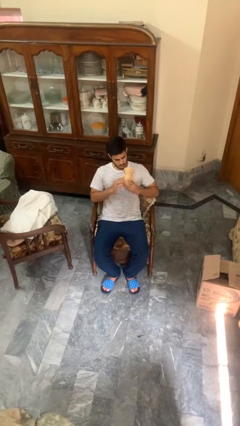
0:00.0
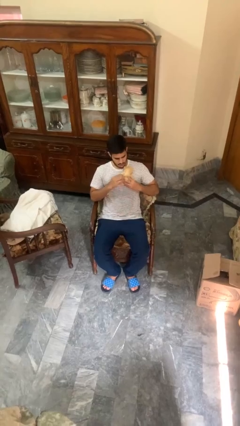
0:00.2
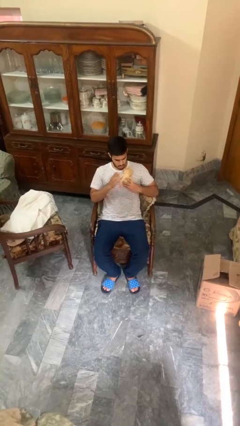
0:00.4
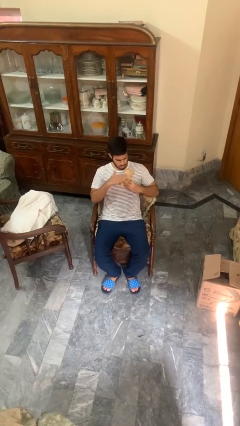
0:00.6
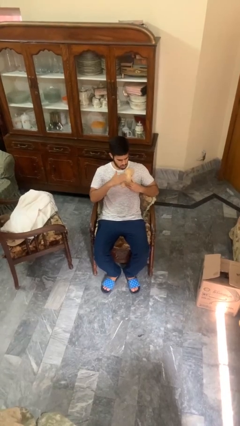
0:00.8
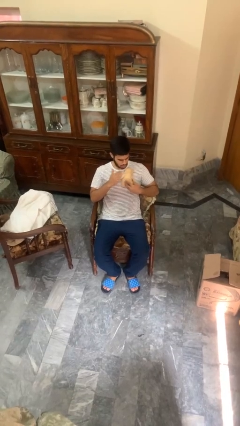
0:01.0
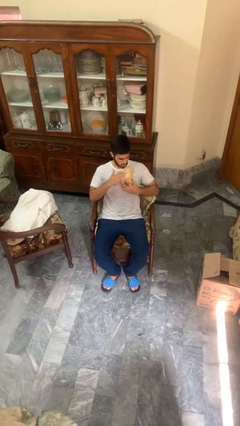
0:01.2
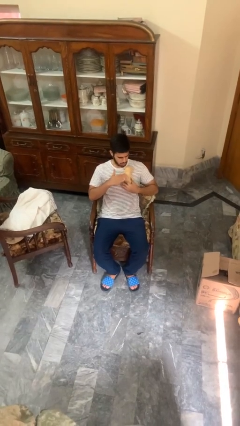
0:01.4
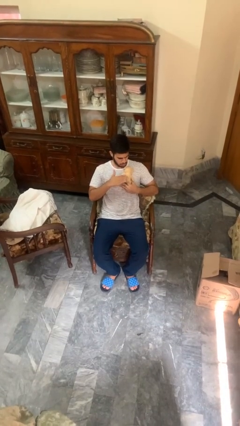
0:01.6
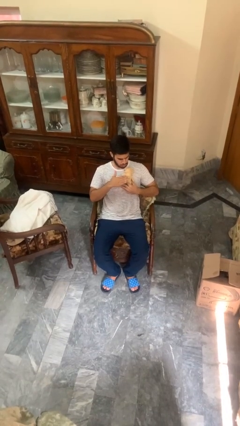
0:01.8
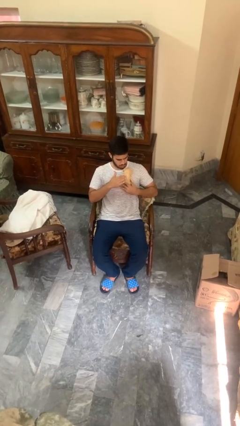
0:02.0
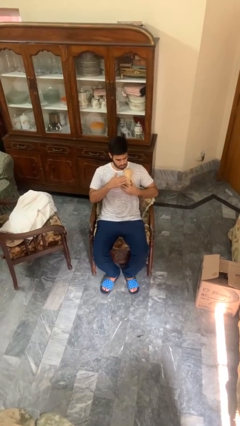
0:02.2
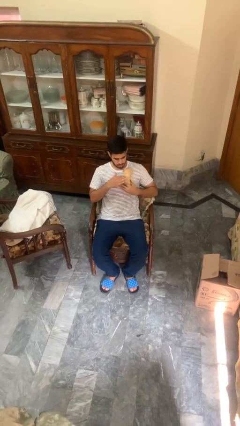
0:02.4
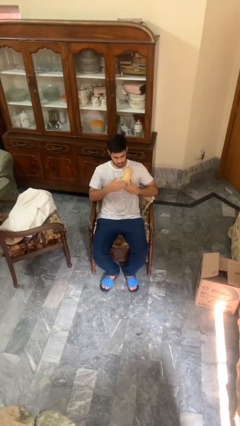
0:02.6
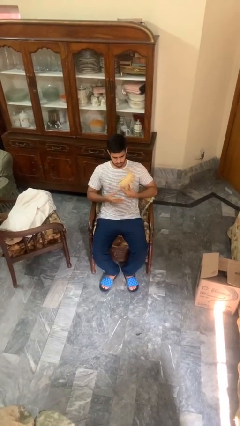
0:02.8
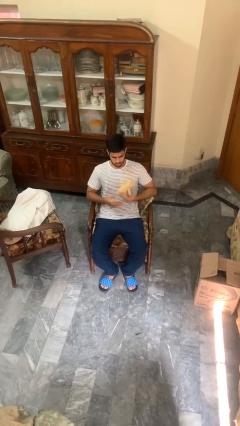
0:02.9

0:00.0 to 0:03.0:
person hugs stuffed animal

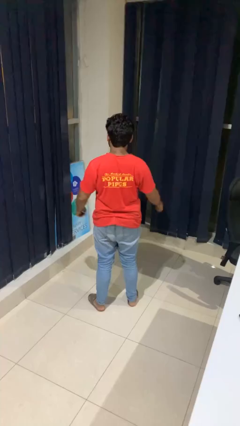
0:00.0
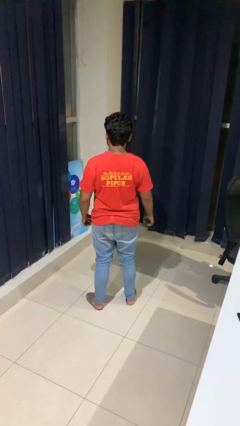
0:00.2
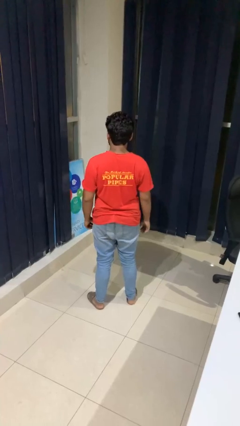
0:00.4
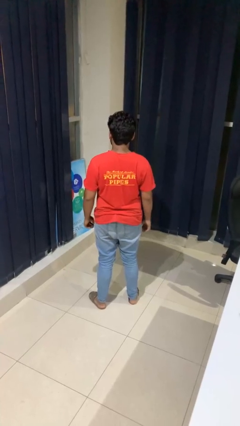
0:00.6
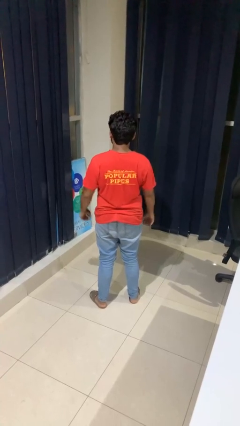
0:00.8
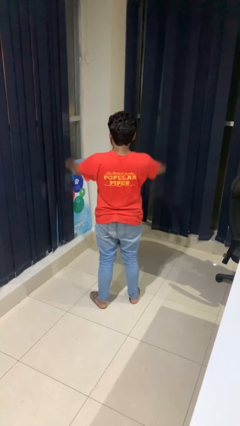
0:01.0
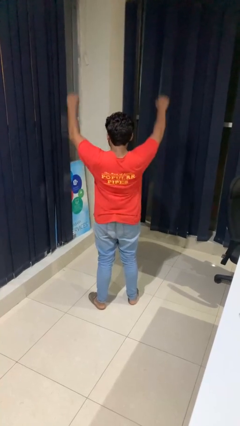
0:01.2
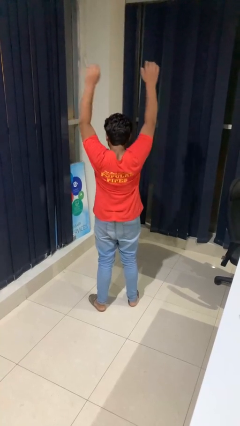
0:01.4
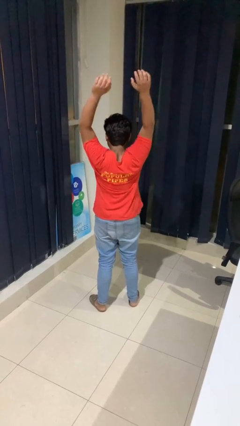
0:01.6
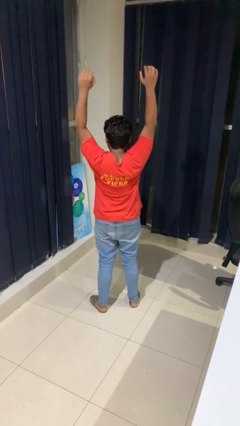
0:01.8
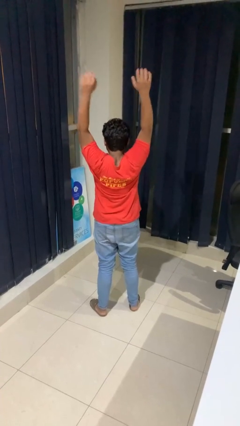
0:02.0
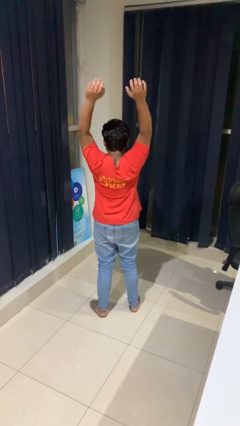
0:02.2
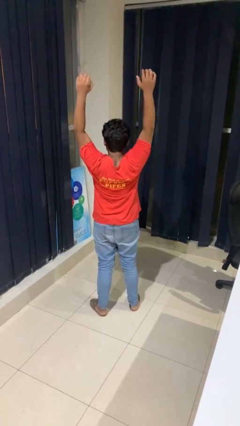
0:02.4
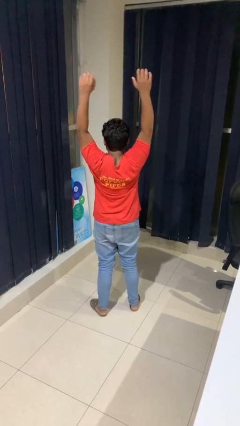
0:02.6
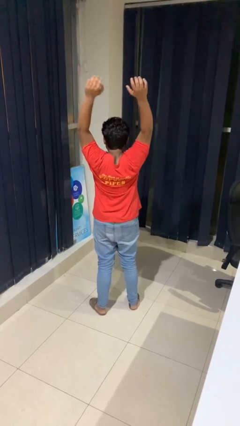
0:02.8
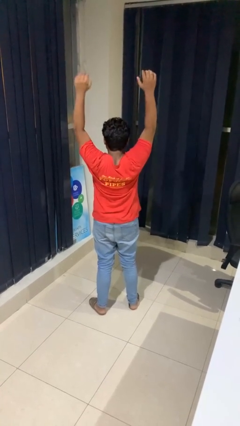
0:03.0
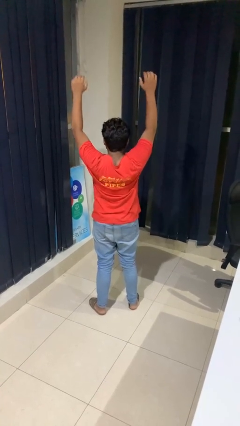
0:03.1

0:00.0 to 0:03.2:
person stretches arms over head

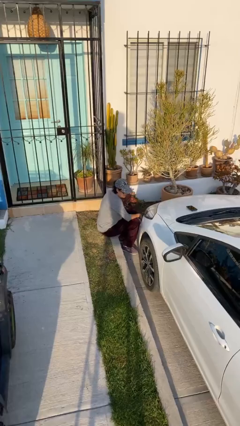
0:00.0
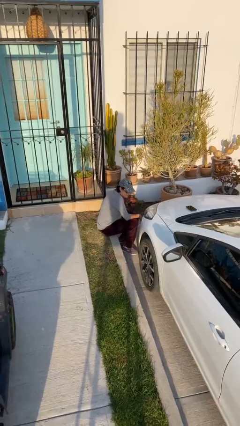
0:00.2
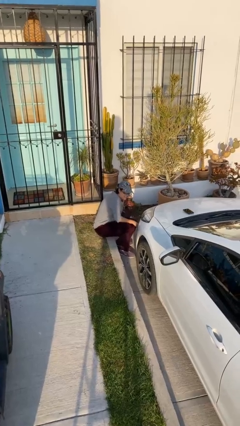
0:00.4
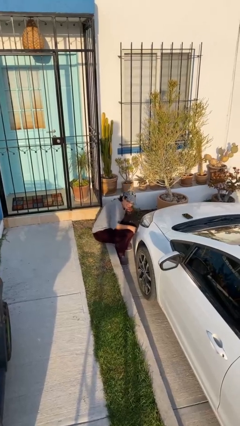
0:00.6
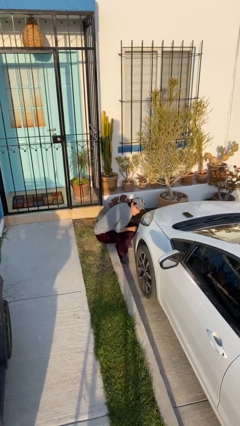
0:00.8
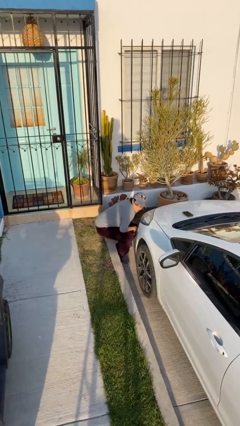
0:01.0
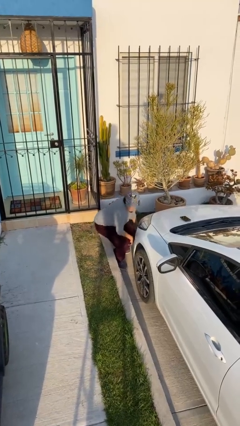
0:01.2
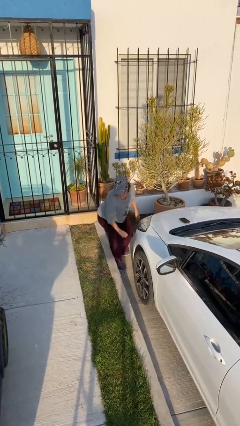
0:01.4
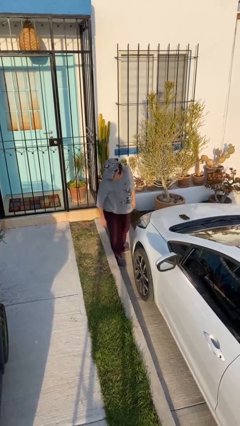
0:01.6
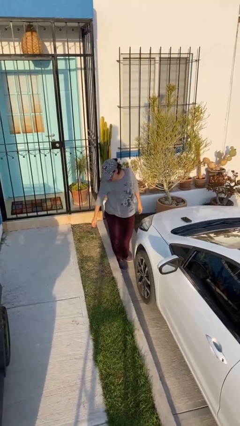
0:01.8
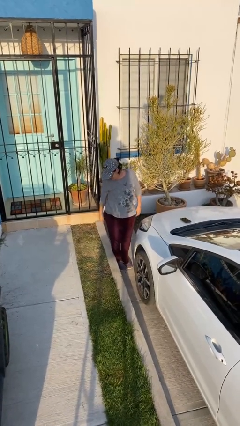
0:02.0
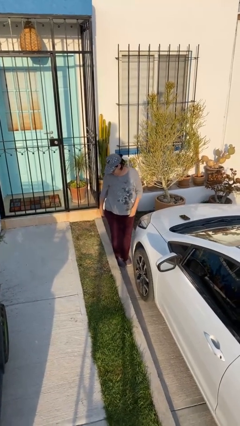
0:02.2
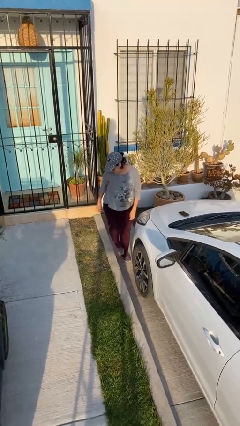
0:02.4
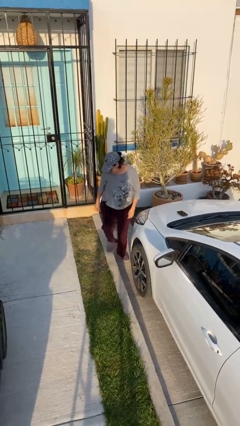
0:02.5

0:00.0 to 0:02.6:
person stands up

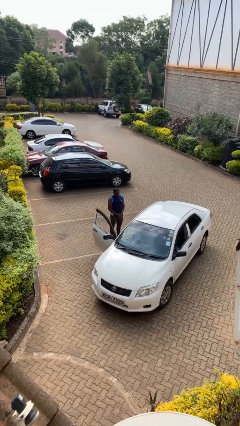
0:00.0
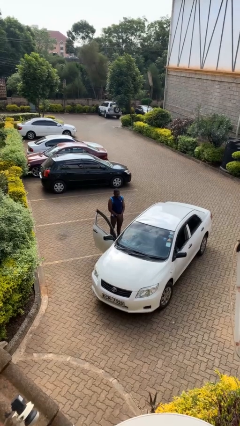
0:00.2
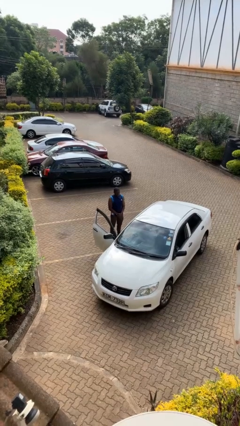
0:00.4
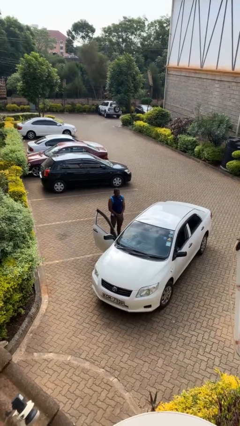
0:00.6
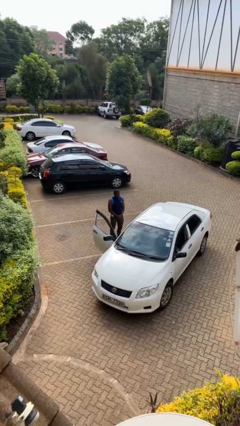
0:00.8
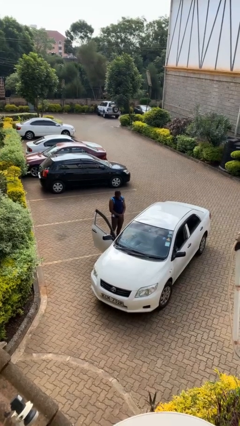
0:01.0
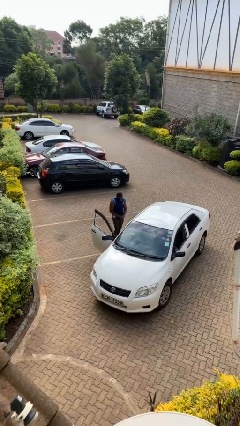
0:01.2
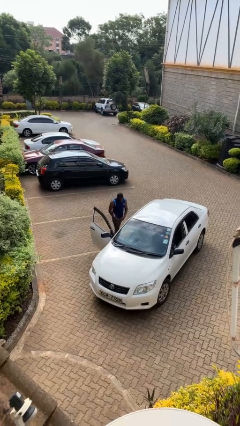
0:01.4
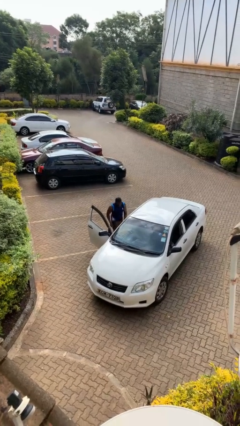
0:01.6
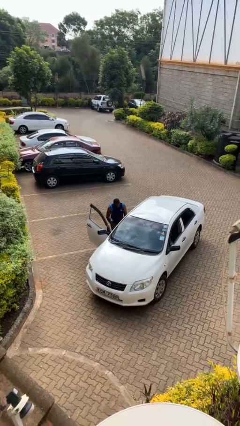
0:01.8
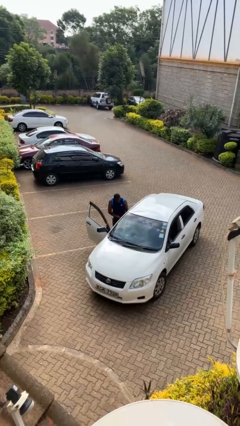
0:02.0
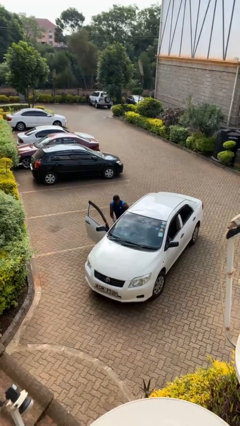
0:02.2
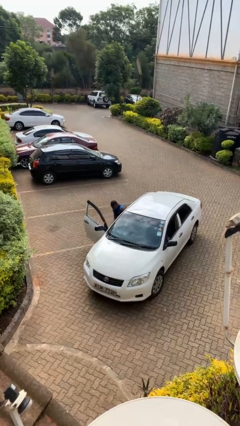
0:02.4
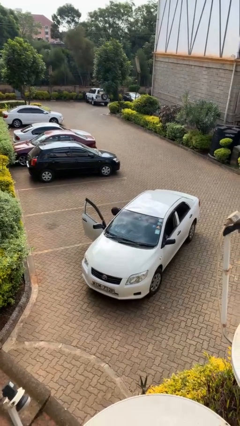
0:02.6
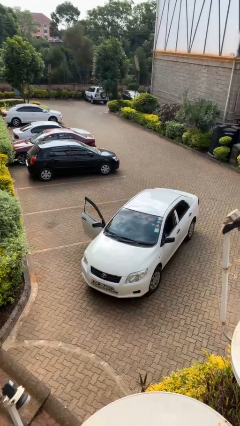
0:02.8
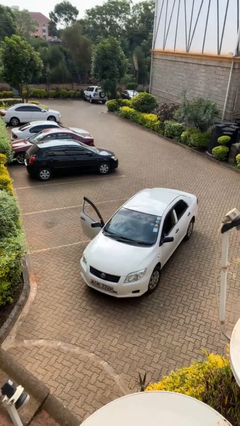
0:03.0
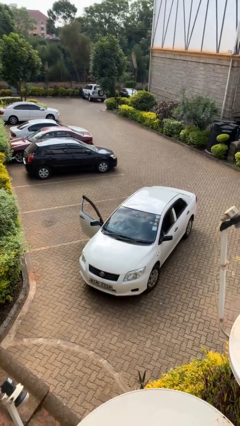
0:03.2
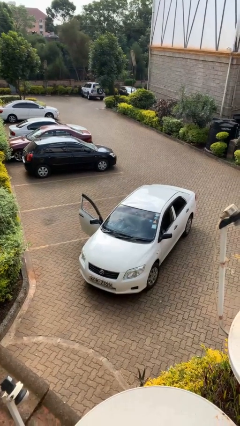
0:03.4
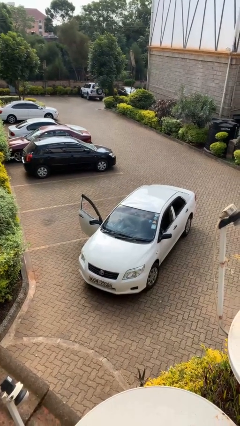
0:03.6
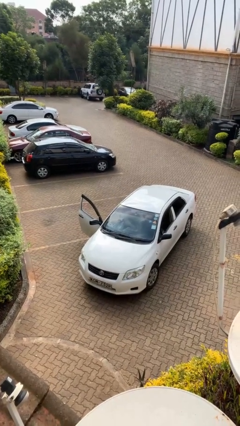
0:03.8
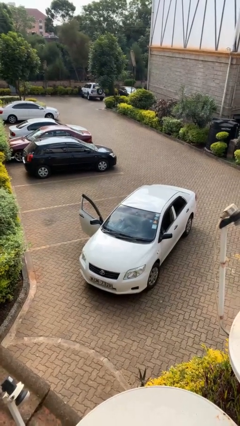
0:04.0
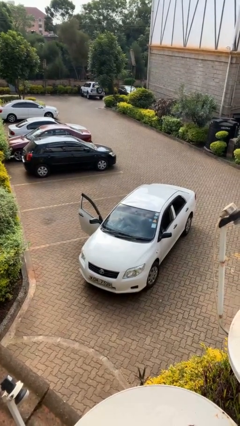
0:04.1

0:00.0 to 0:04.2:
person enters car

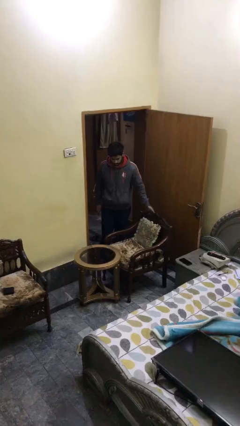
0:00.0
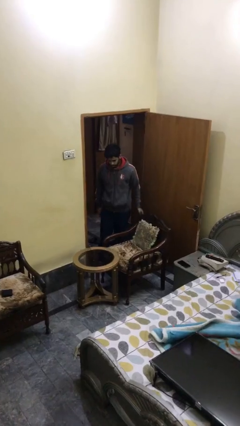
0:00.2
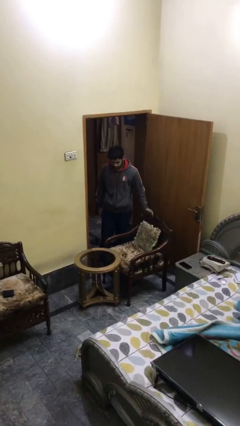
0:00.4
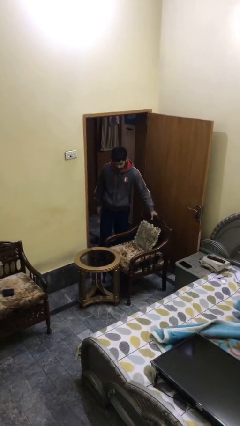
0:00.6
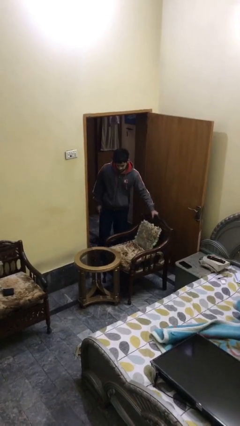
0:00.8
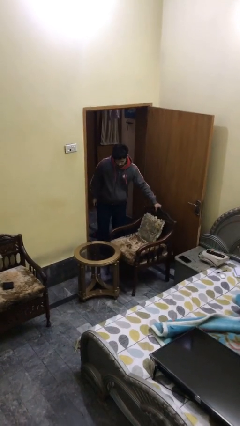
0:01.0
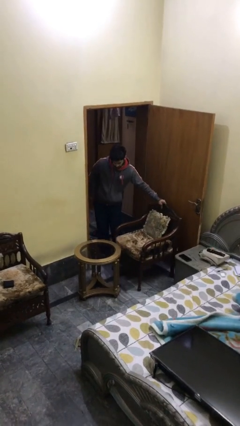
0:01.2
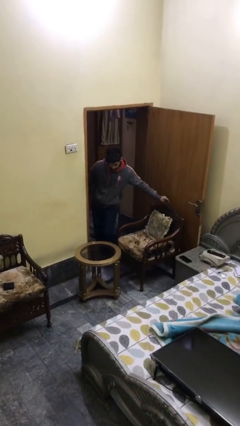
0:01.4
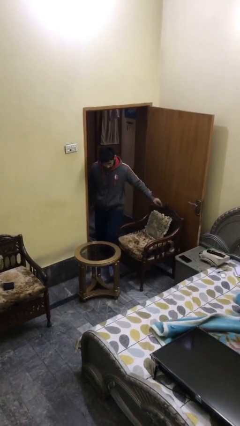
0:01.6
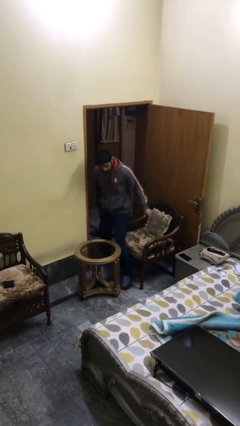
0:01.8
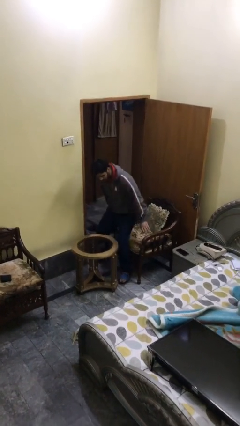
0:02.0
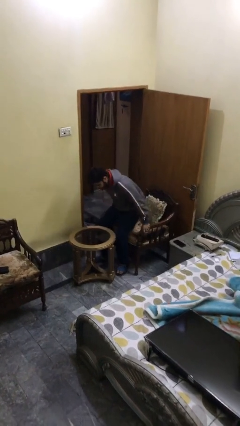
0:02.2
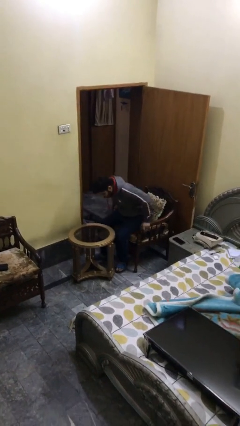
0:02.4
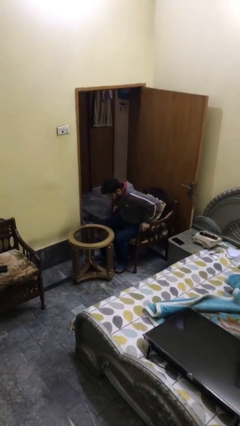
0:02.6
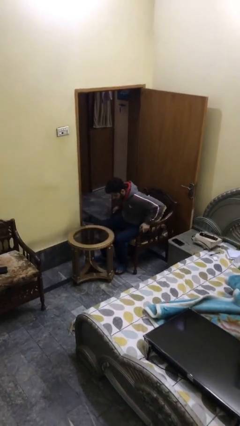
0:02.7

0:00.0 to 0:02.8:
person sits down

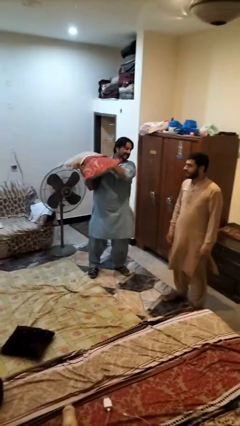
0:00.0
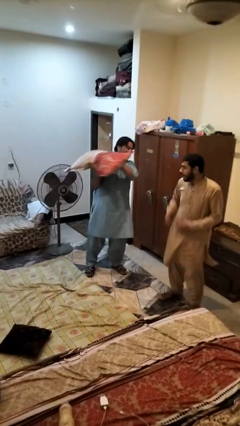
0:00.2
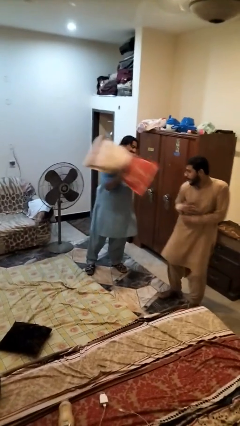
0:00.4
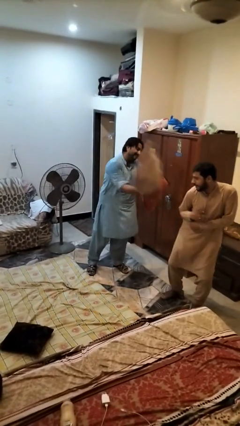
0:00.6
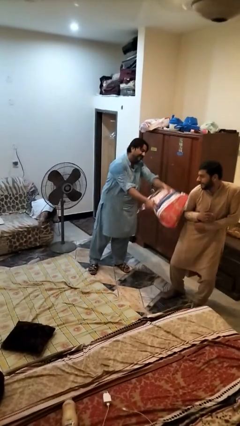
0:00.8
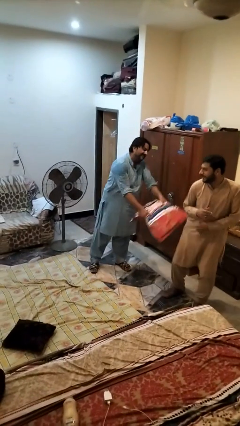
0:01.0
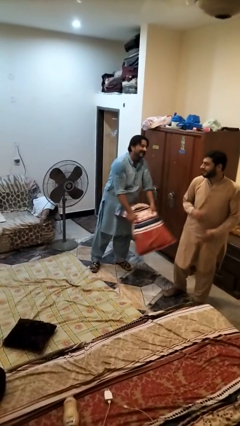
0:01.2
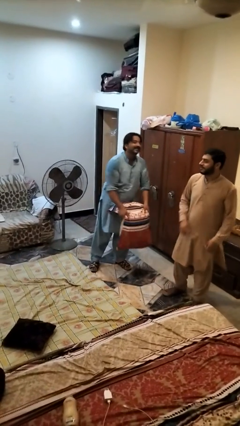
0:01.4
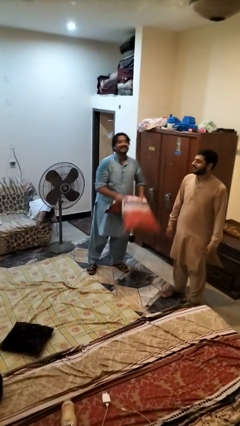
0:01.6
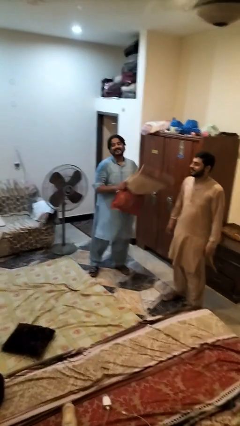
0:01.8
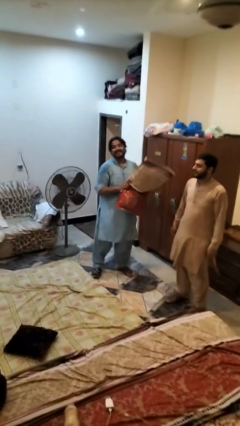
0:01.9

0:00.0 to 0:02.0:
person hits person with pillow
